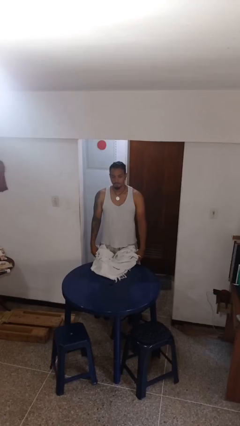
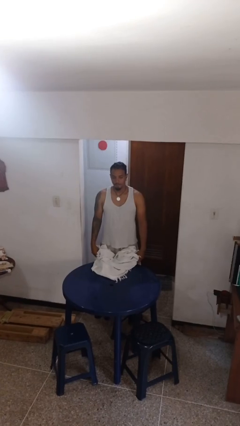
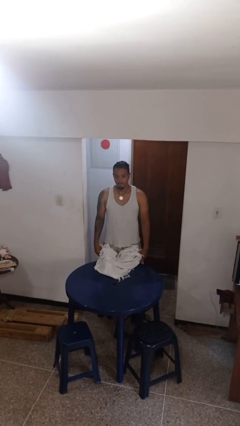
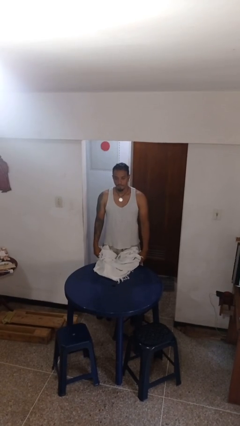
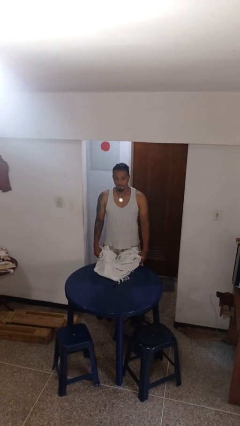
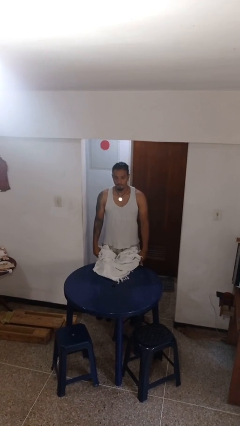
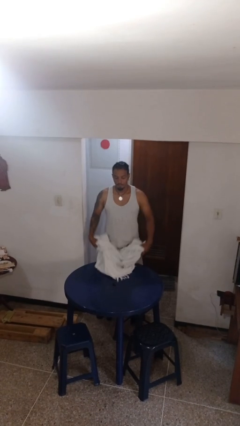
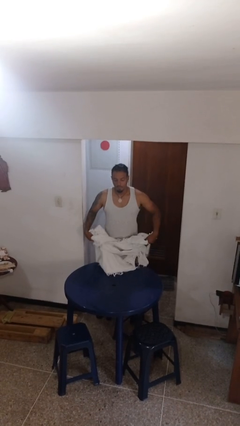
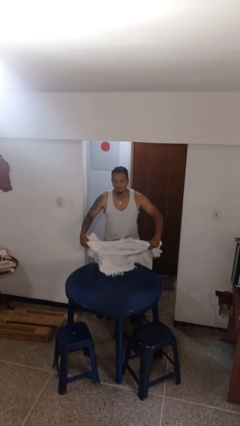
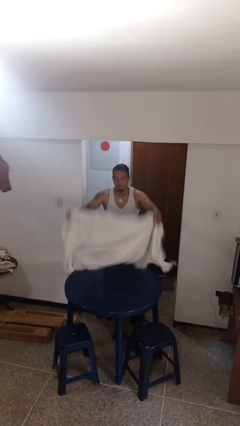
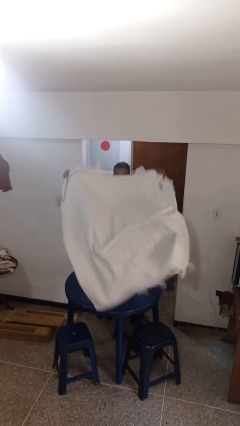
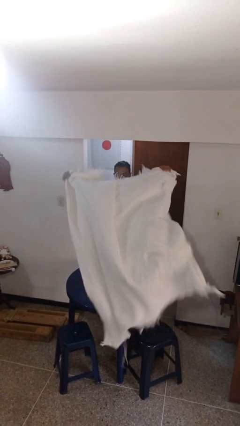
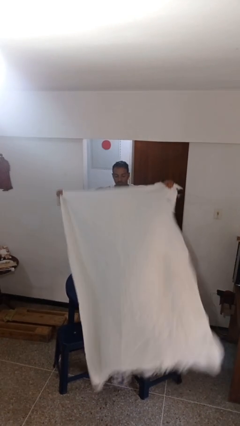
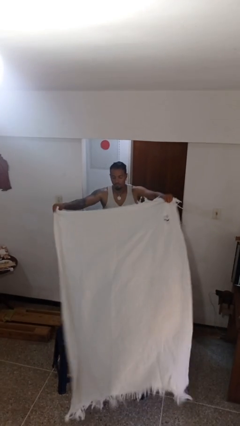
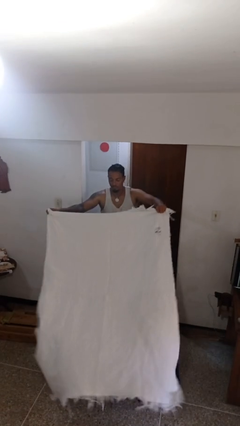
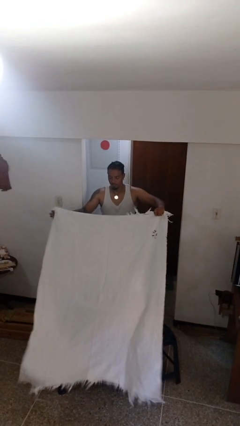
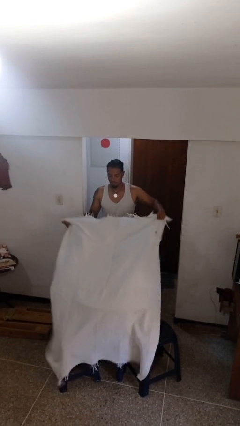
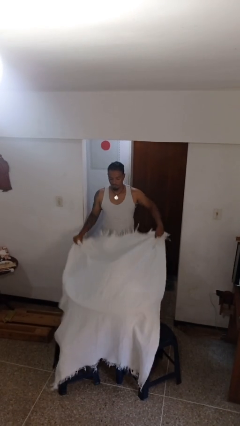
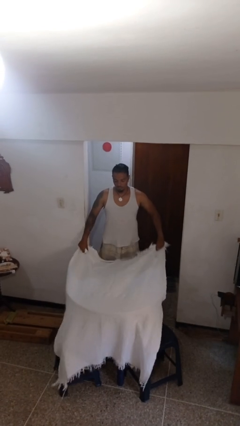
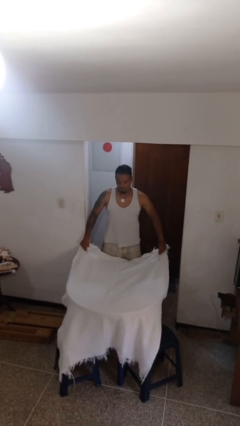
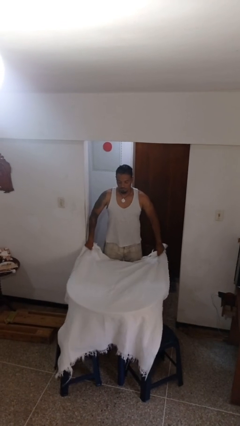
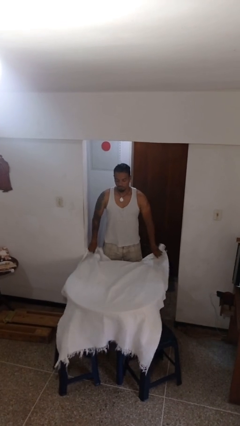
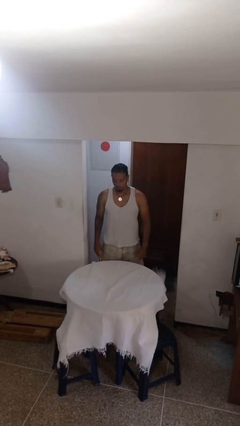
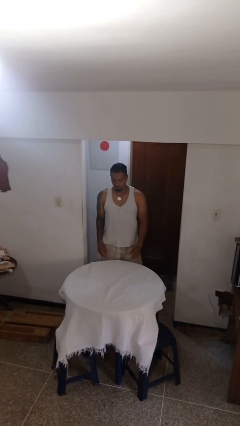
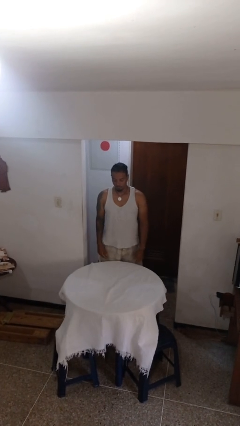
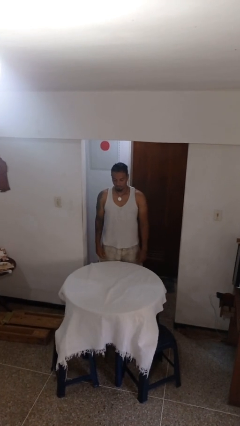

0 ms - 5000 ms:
person spreads tablecloth

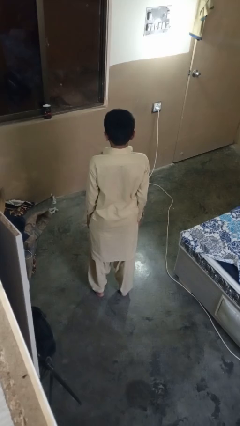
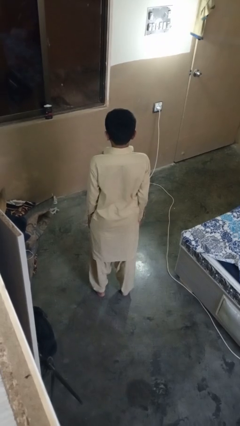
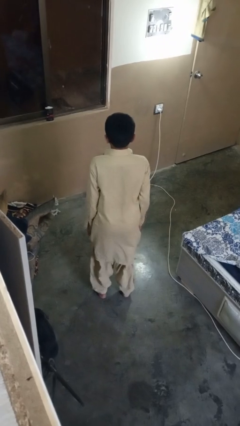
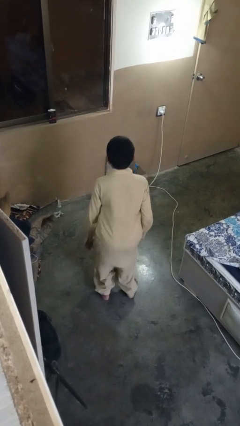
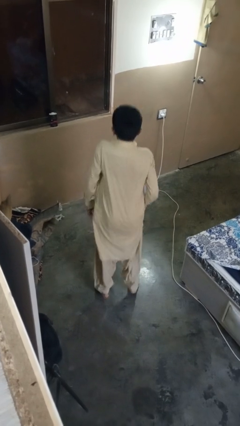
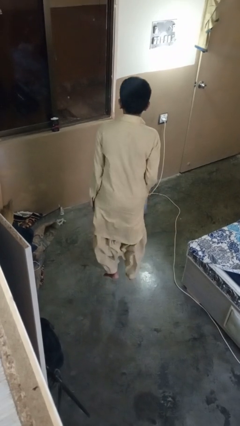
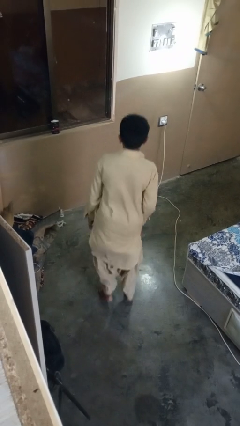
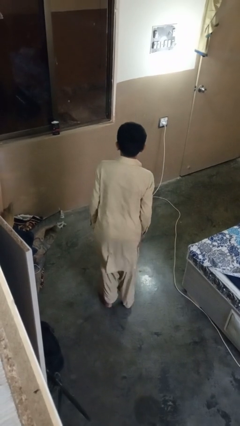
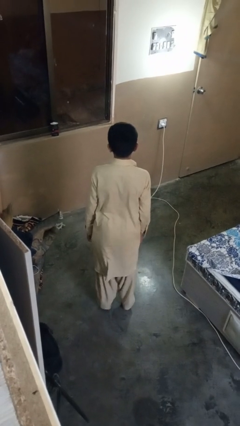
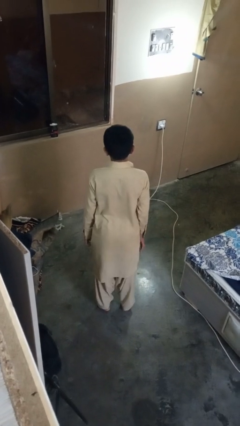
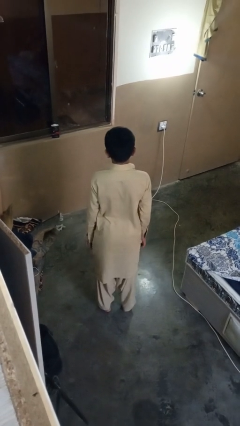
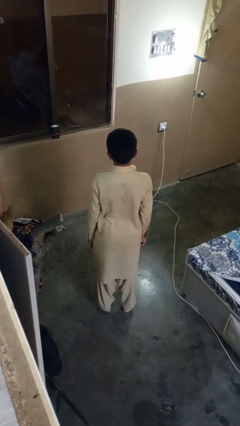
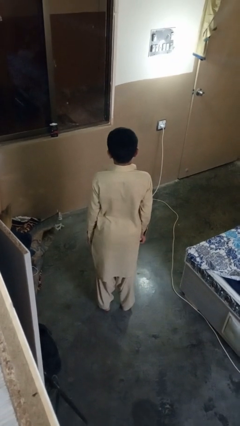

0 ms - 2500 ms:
person jumps

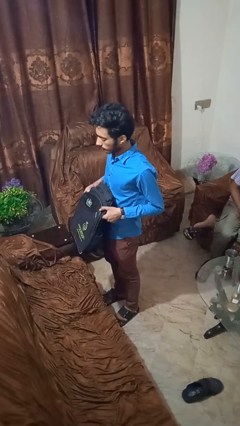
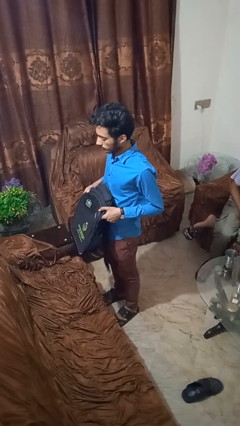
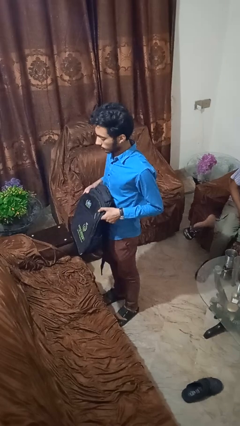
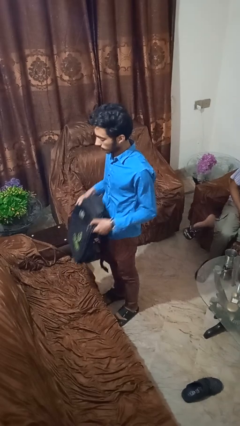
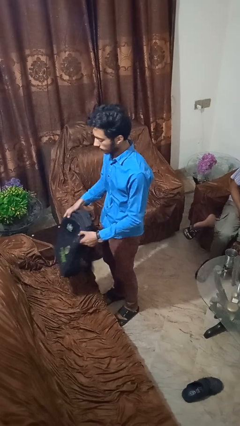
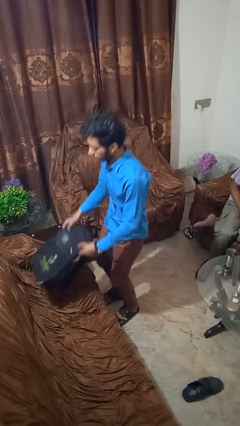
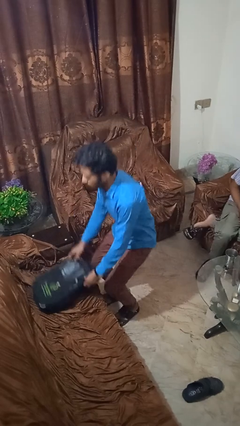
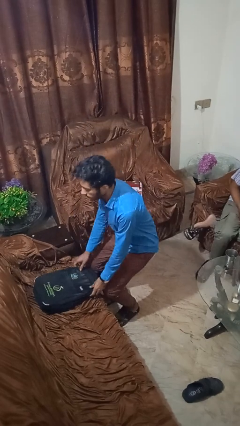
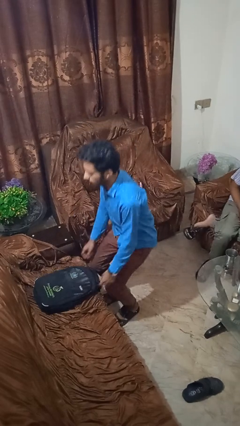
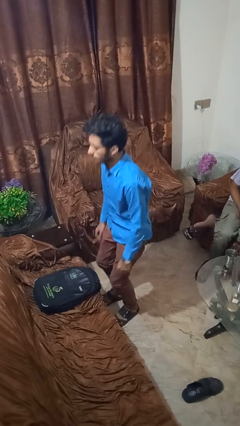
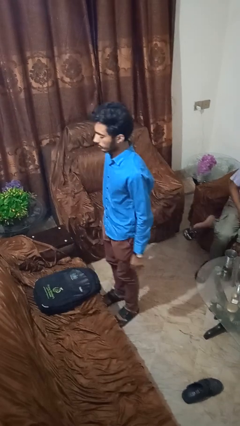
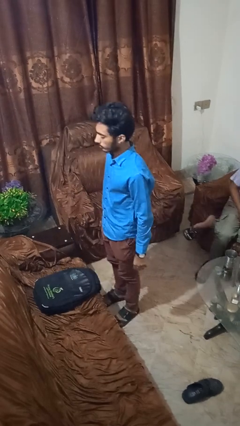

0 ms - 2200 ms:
person puts down object on couch

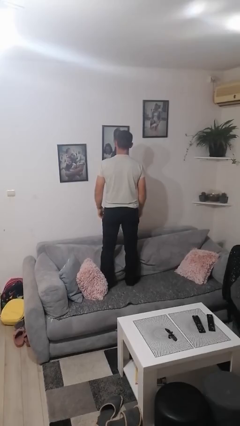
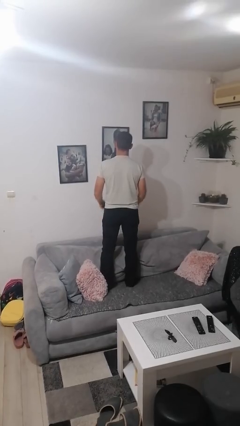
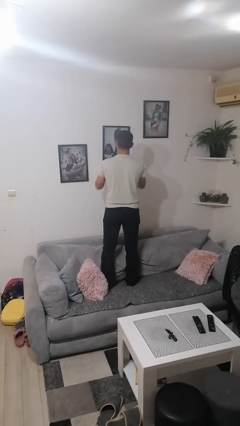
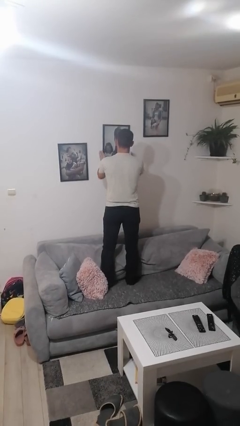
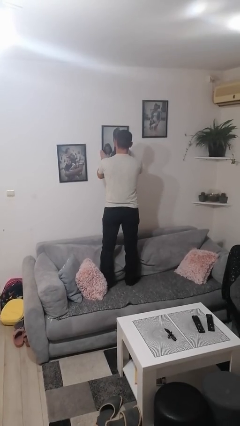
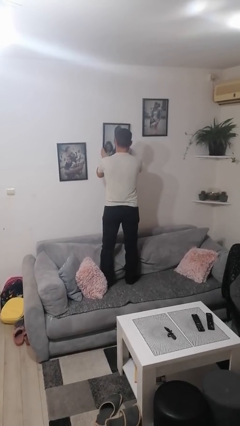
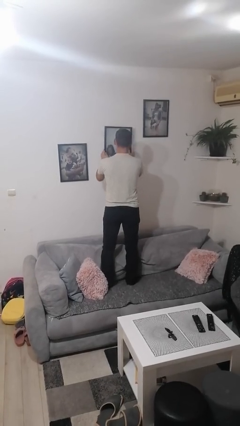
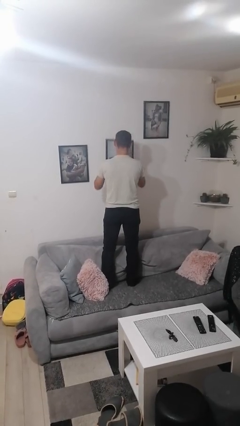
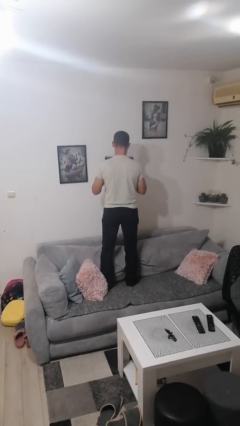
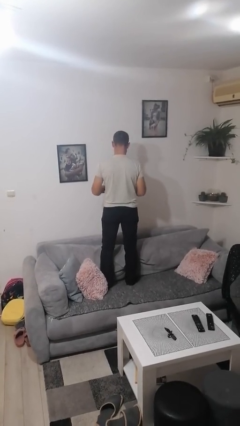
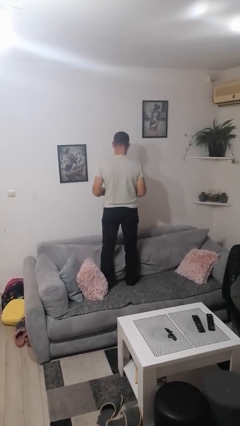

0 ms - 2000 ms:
person takes down picture frame

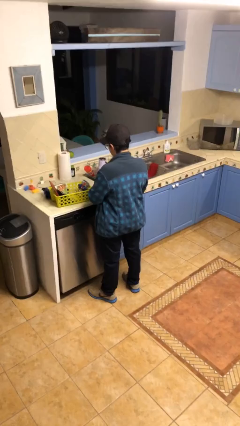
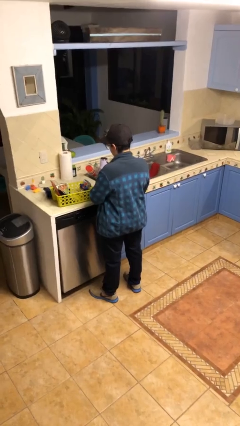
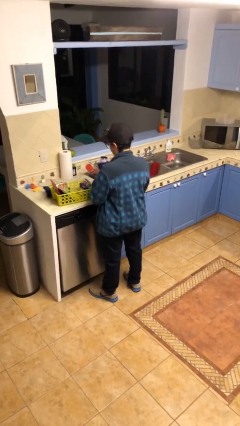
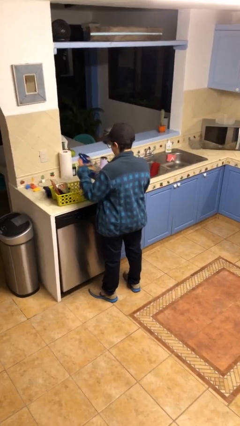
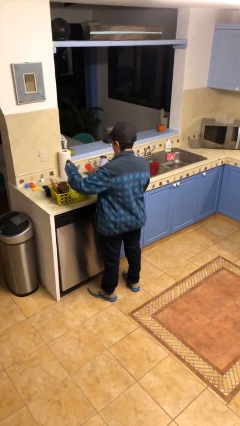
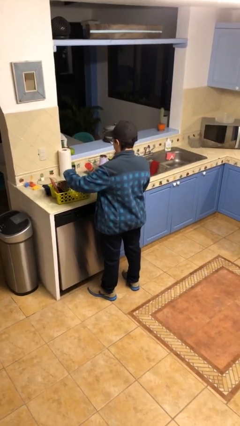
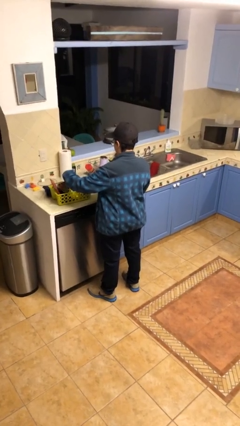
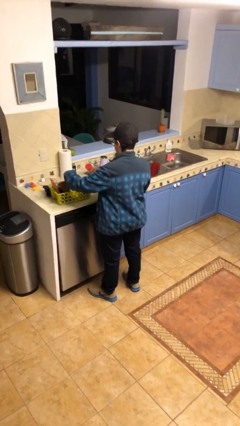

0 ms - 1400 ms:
person puts object into basket

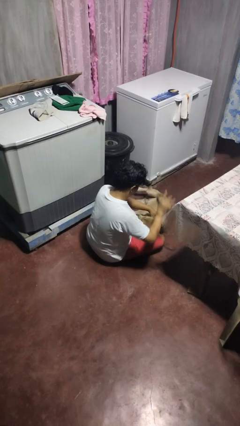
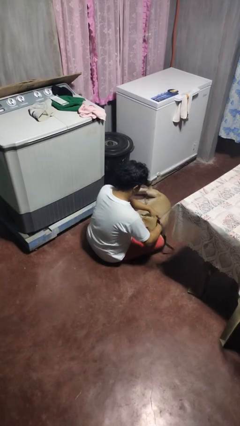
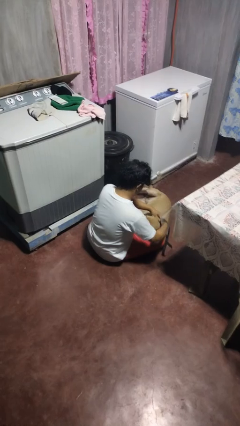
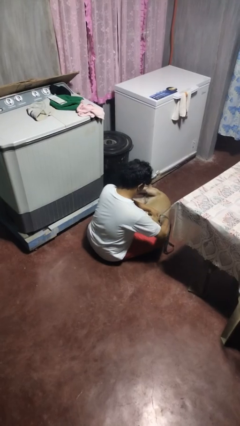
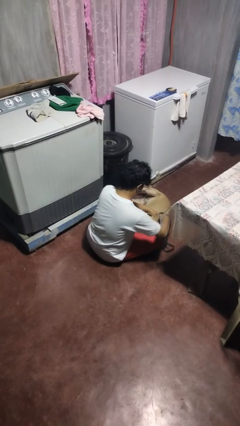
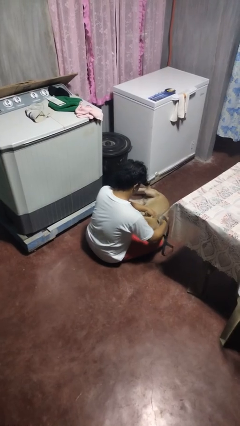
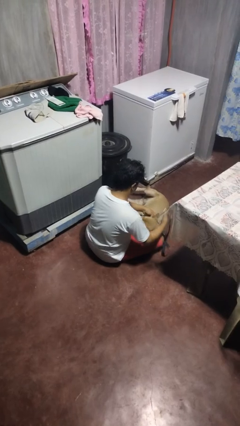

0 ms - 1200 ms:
person unattaches leash from dog

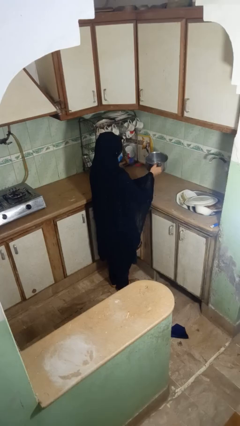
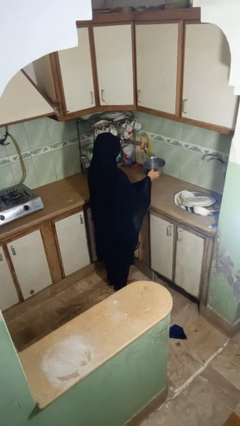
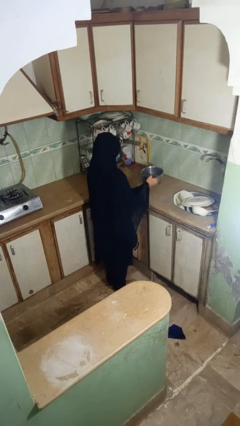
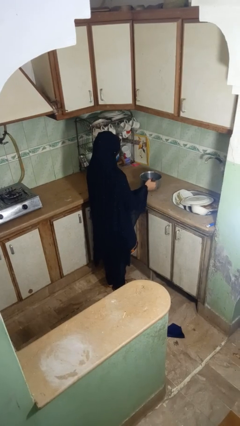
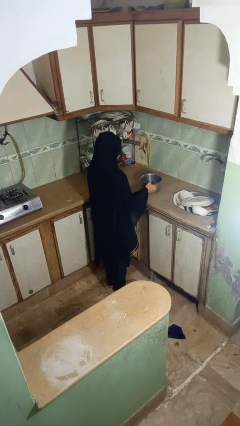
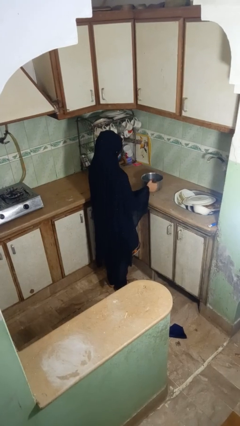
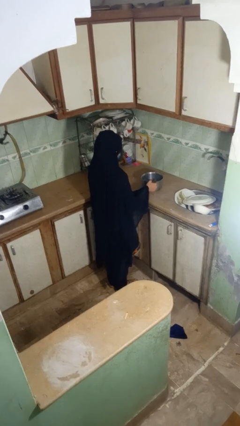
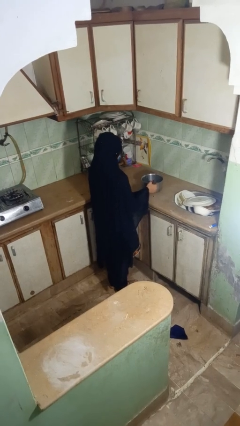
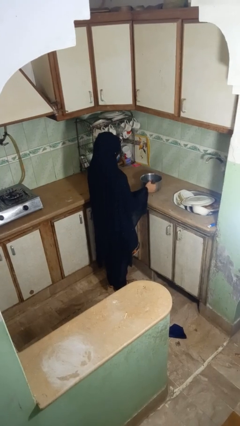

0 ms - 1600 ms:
person puts down object on countertop

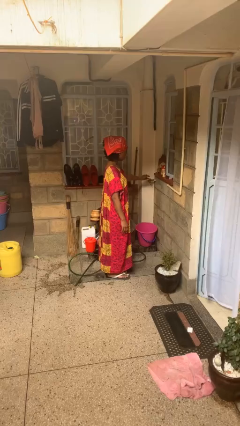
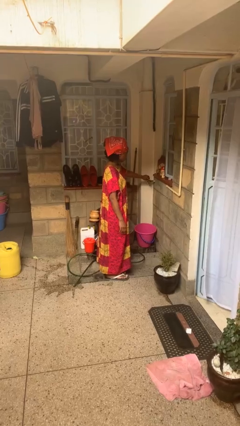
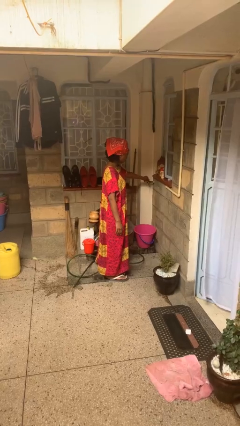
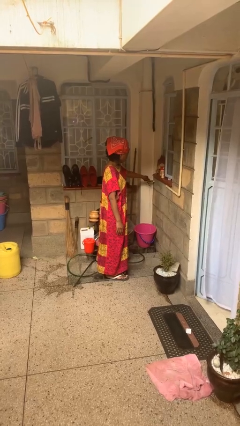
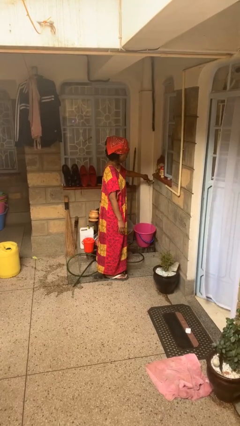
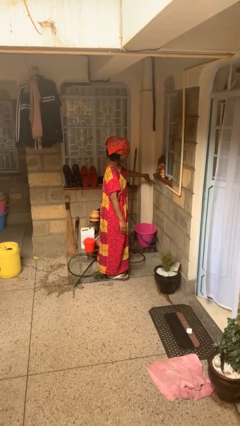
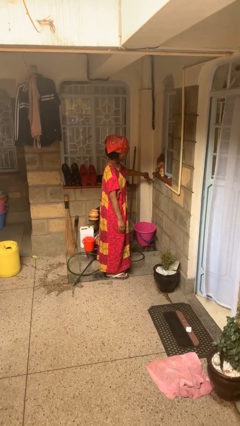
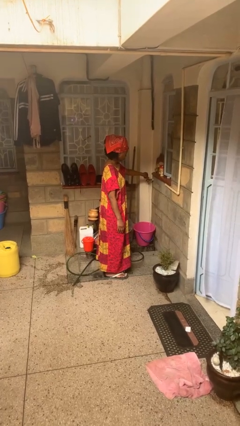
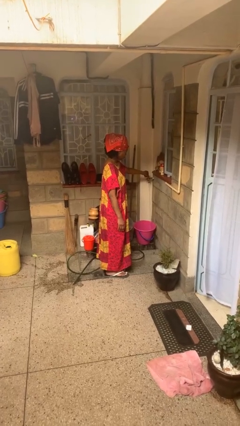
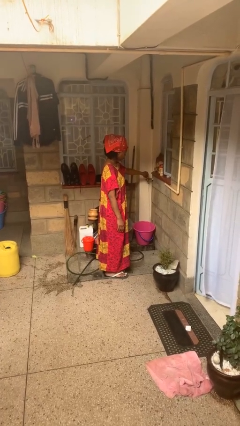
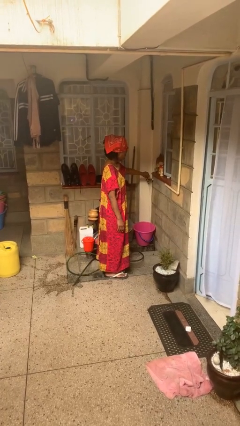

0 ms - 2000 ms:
person turns on faucet
